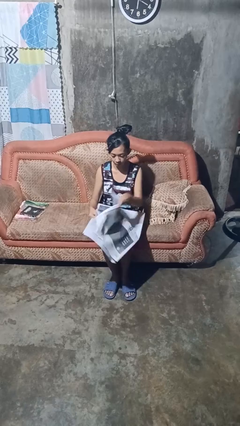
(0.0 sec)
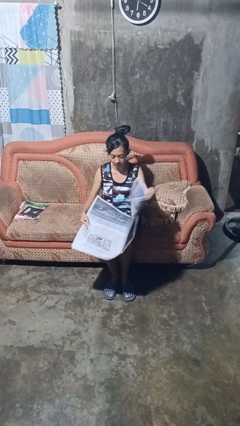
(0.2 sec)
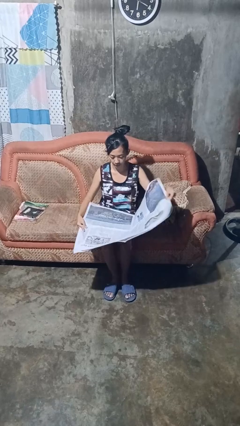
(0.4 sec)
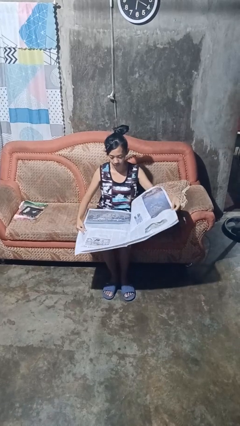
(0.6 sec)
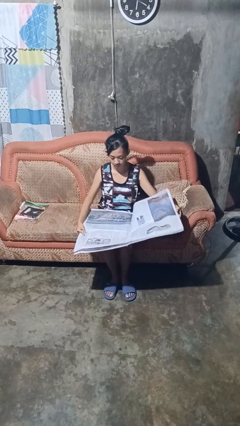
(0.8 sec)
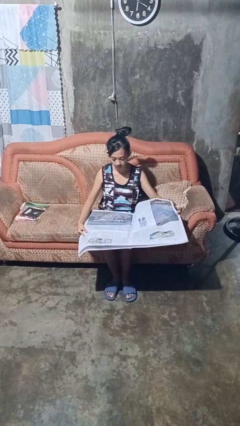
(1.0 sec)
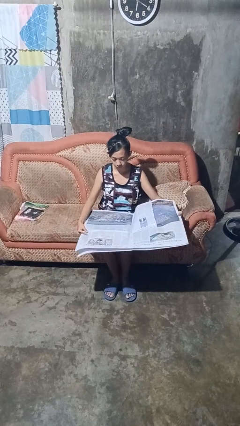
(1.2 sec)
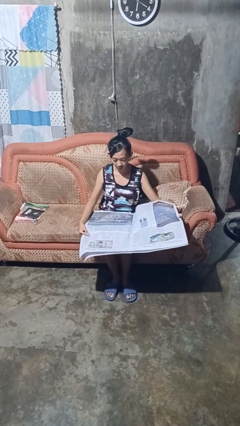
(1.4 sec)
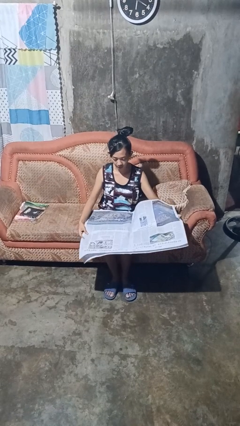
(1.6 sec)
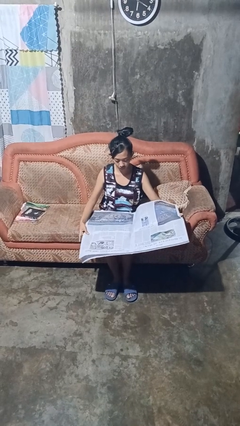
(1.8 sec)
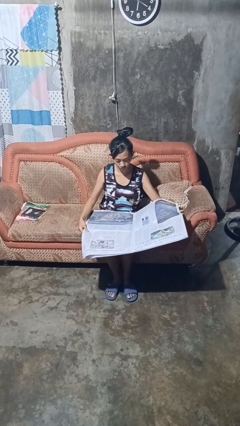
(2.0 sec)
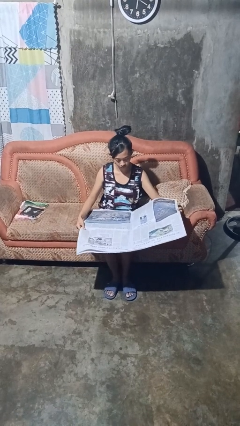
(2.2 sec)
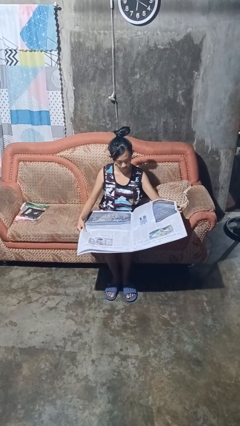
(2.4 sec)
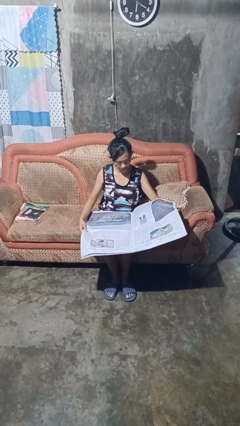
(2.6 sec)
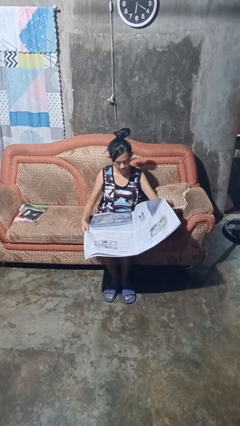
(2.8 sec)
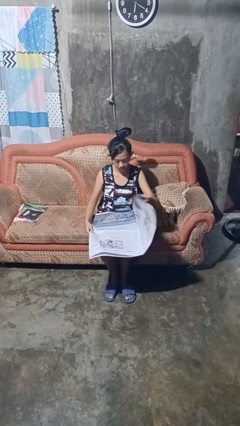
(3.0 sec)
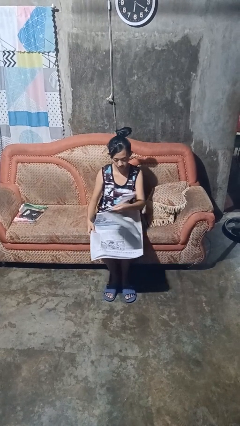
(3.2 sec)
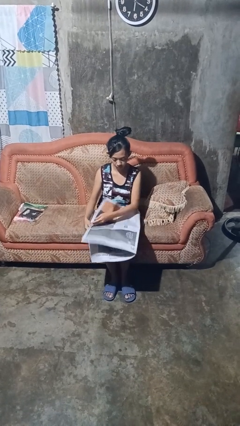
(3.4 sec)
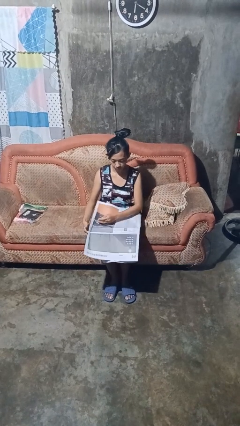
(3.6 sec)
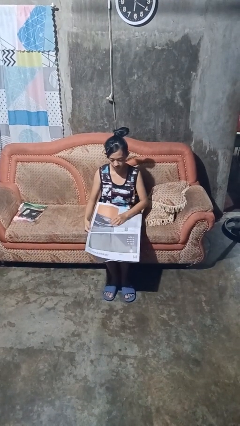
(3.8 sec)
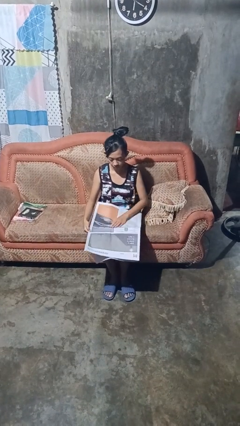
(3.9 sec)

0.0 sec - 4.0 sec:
person reads newspaper

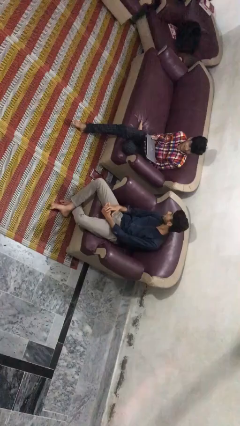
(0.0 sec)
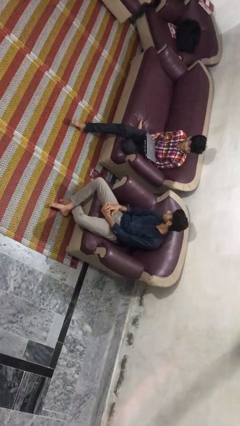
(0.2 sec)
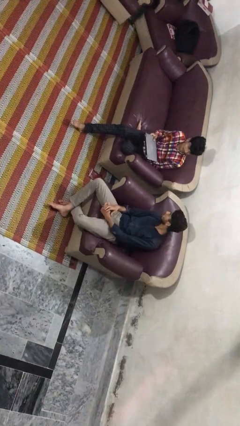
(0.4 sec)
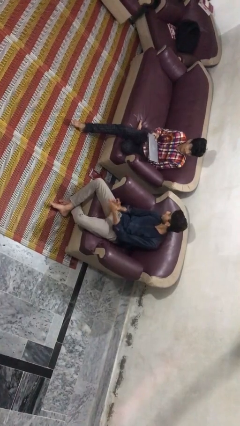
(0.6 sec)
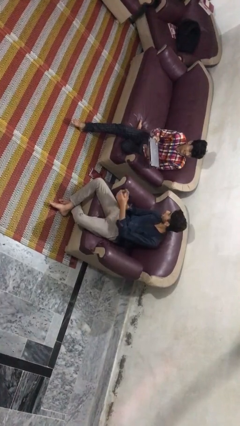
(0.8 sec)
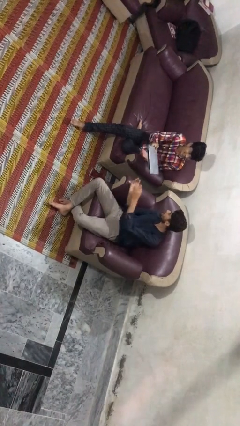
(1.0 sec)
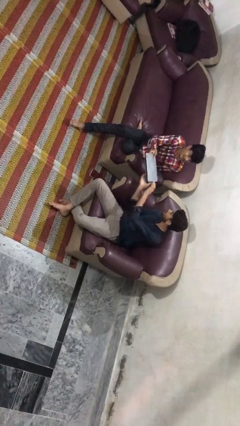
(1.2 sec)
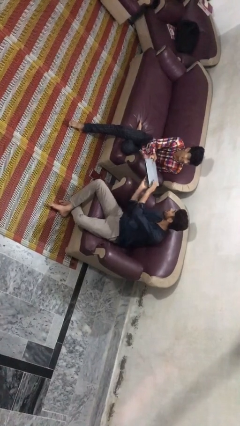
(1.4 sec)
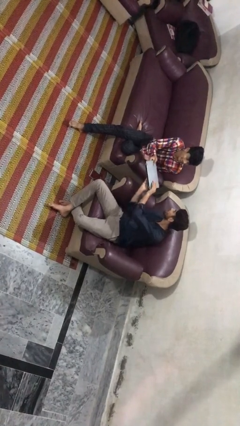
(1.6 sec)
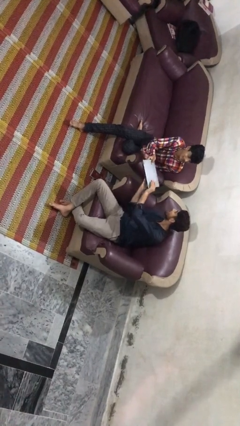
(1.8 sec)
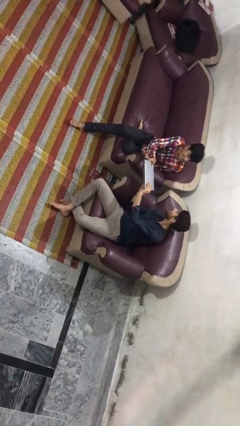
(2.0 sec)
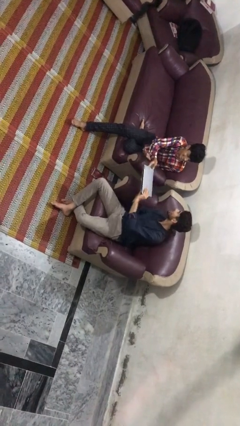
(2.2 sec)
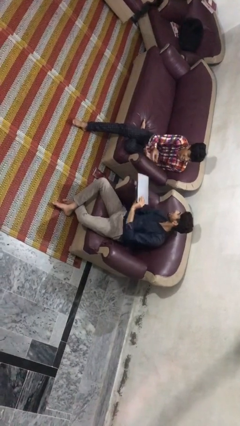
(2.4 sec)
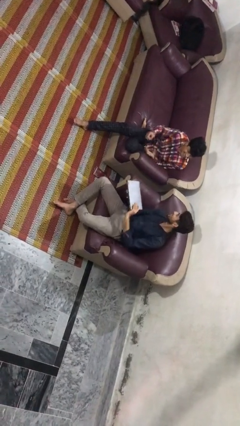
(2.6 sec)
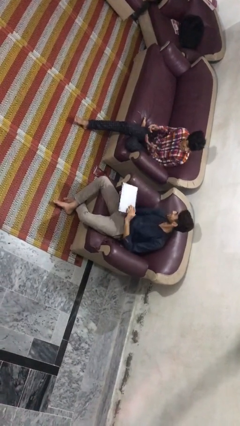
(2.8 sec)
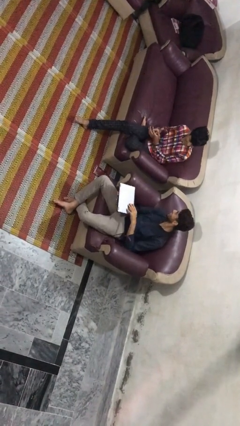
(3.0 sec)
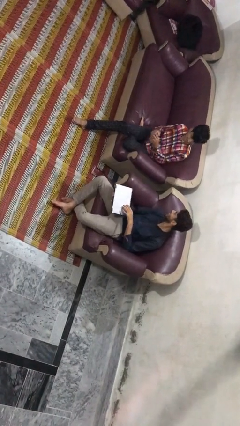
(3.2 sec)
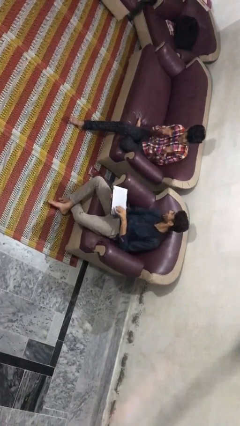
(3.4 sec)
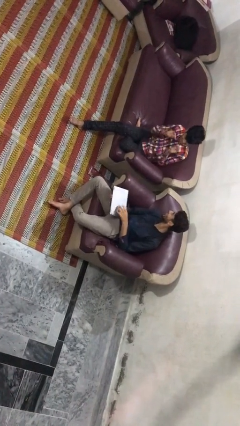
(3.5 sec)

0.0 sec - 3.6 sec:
person transfers object to person

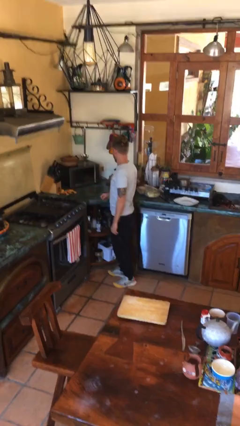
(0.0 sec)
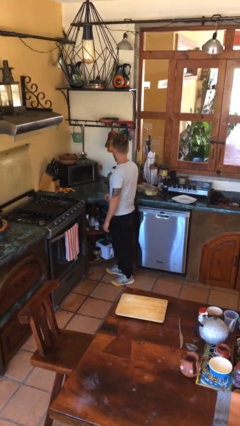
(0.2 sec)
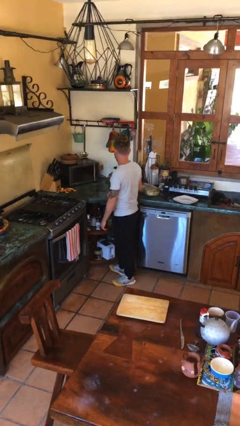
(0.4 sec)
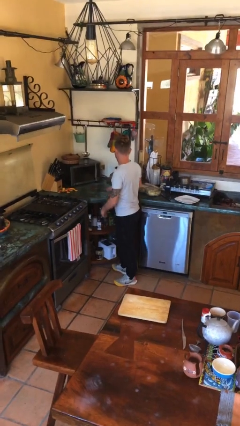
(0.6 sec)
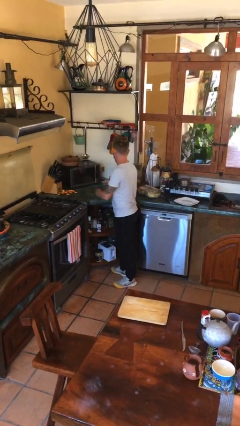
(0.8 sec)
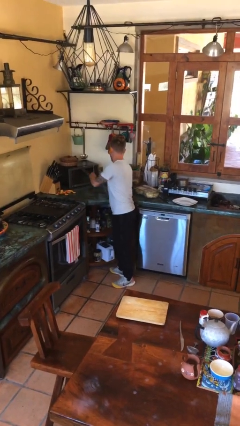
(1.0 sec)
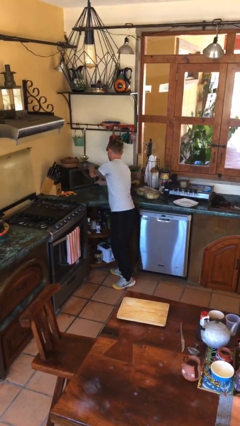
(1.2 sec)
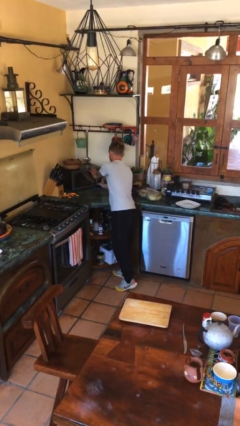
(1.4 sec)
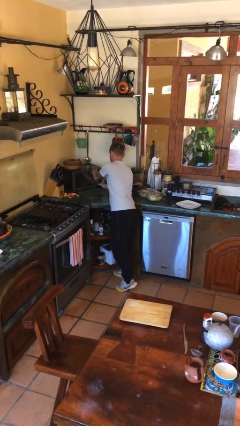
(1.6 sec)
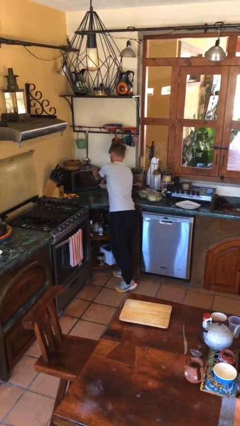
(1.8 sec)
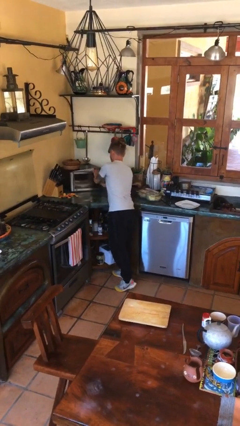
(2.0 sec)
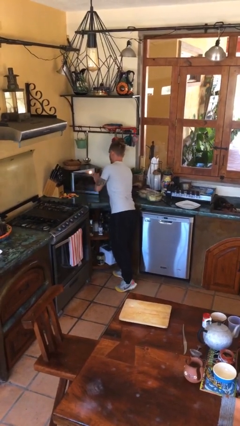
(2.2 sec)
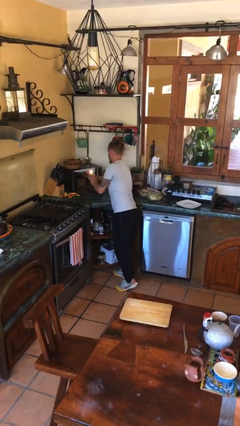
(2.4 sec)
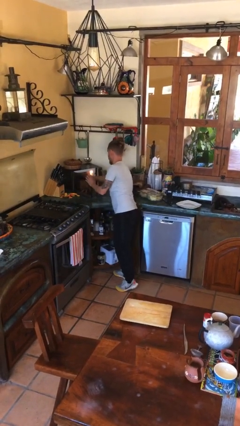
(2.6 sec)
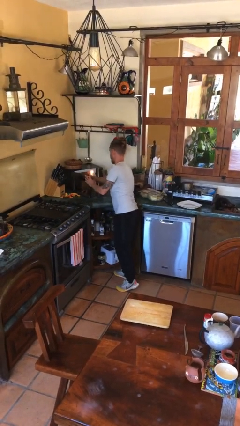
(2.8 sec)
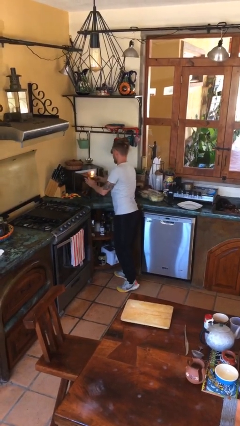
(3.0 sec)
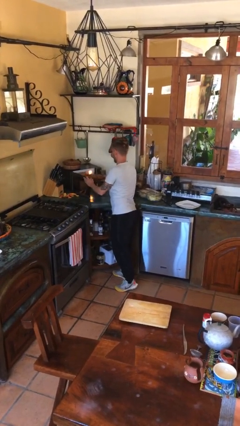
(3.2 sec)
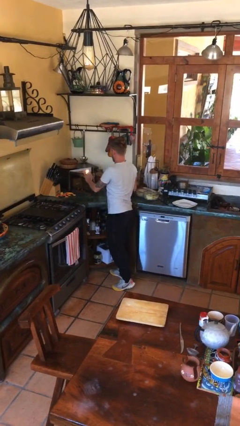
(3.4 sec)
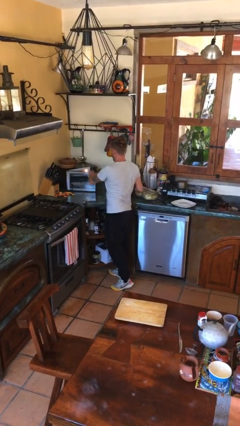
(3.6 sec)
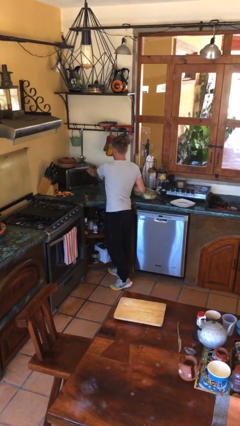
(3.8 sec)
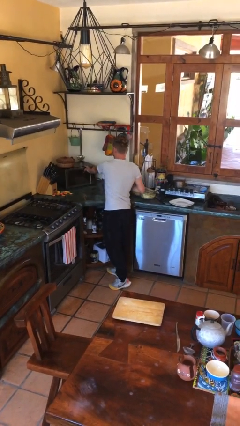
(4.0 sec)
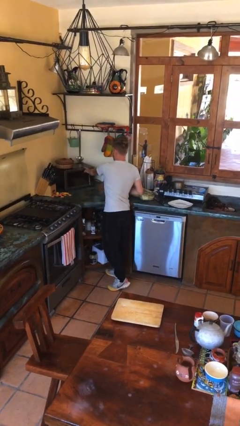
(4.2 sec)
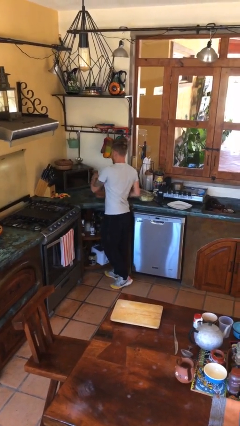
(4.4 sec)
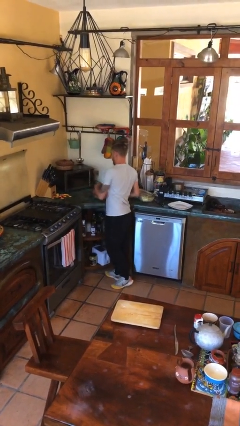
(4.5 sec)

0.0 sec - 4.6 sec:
person takes object from microwave

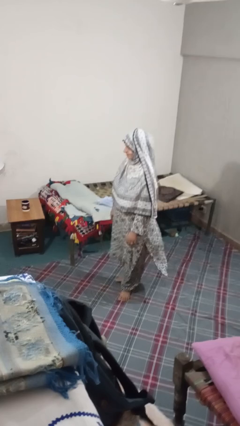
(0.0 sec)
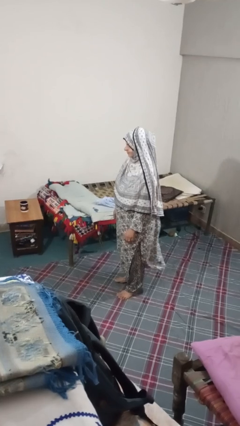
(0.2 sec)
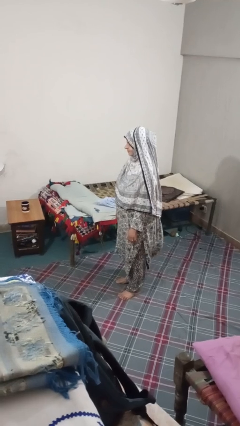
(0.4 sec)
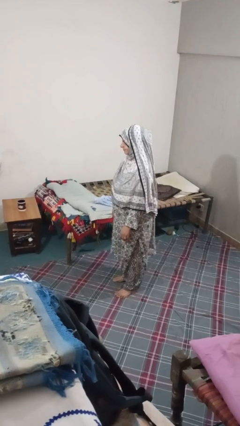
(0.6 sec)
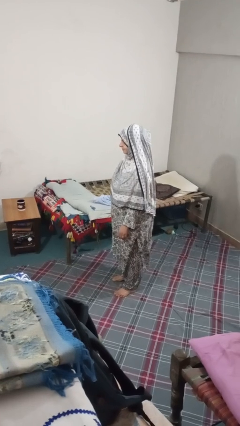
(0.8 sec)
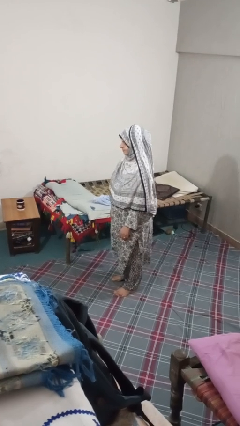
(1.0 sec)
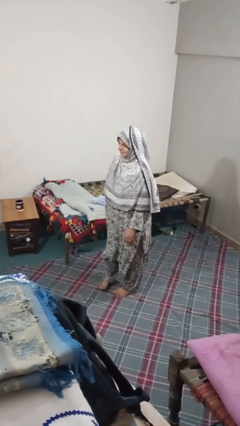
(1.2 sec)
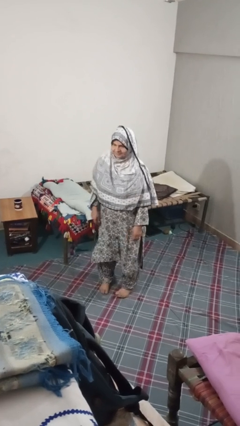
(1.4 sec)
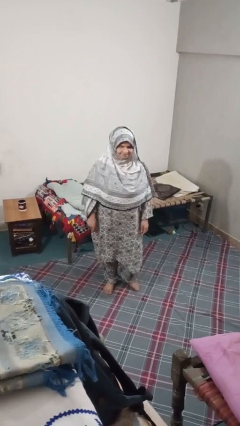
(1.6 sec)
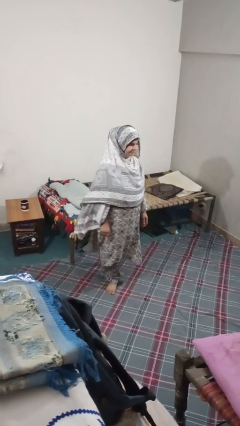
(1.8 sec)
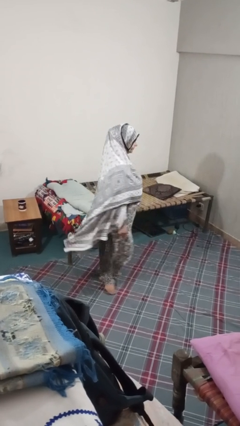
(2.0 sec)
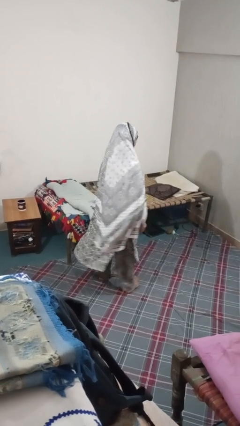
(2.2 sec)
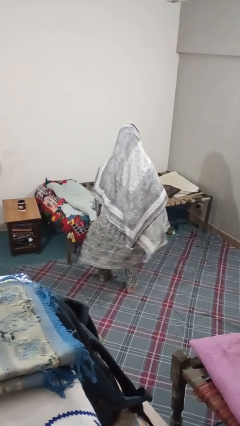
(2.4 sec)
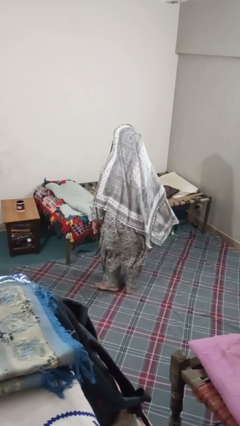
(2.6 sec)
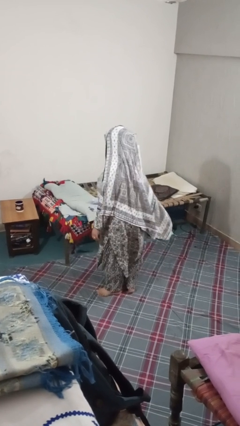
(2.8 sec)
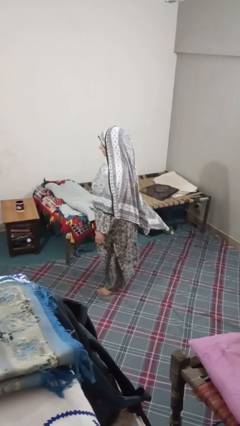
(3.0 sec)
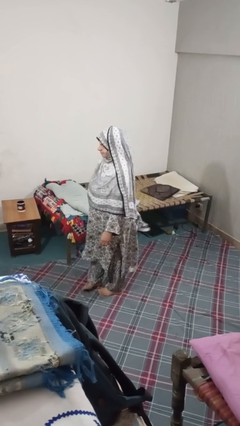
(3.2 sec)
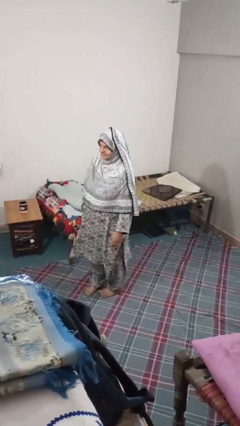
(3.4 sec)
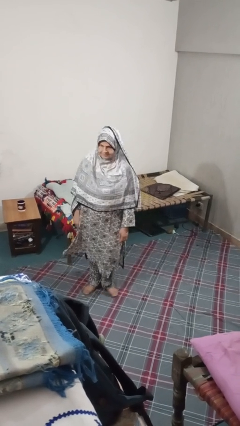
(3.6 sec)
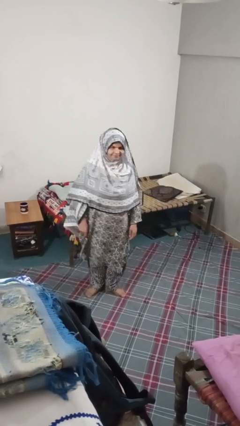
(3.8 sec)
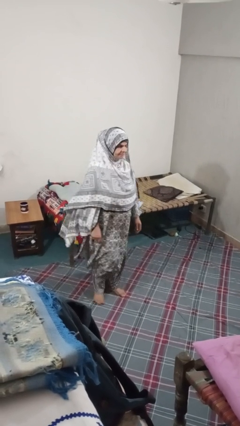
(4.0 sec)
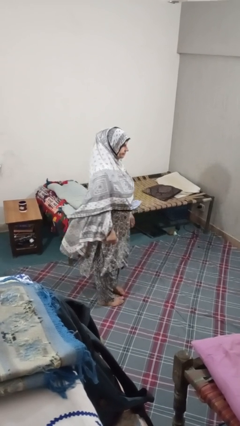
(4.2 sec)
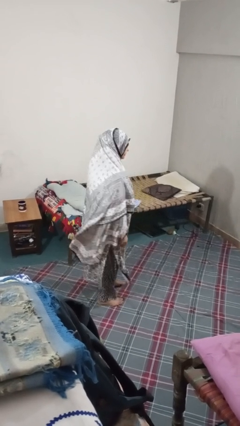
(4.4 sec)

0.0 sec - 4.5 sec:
person twirls

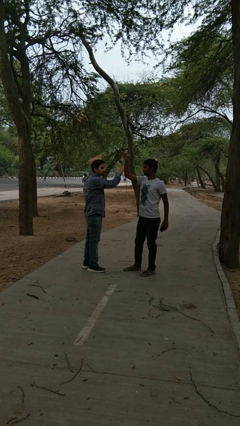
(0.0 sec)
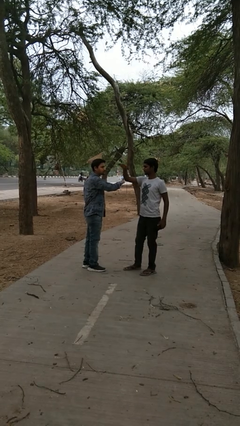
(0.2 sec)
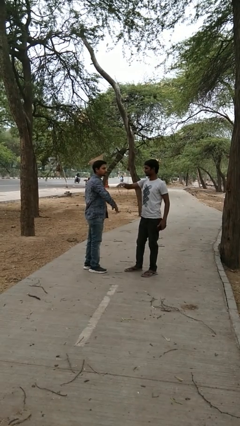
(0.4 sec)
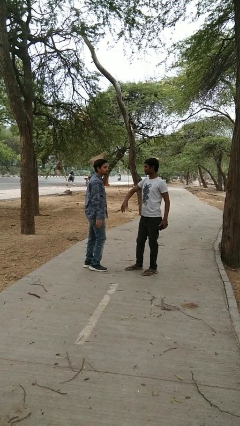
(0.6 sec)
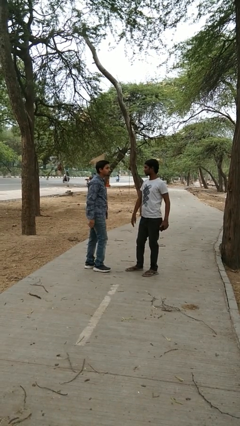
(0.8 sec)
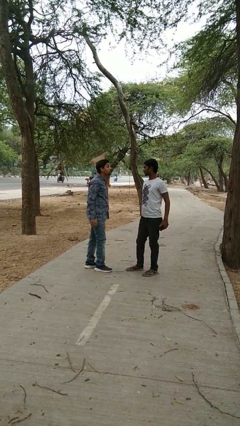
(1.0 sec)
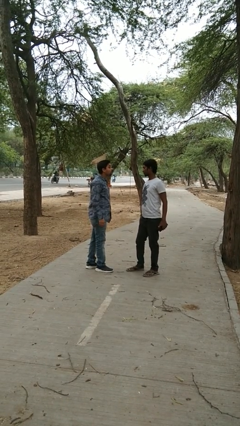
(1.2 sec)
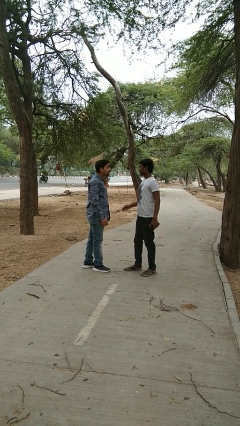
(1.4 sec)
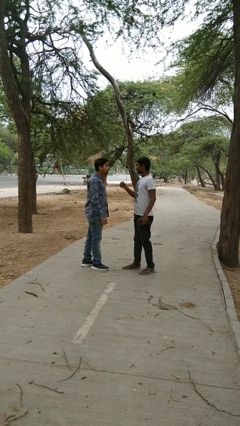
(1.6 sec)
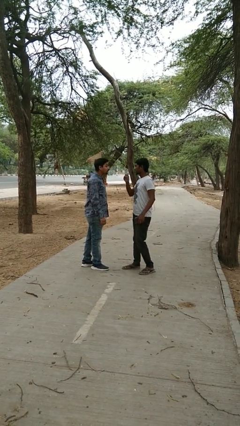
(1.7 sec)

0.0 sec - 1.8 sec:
person highfives hand
